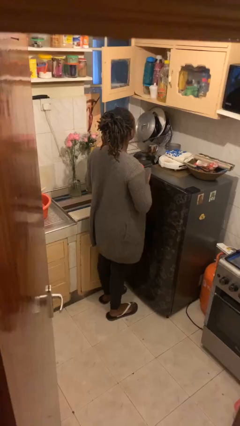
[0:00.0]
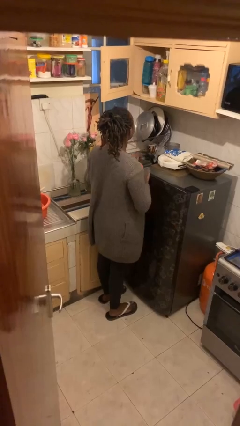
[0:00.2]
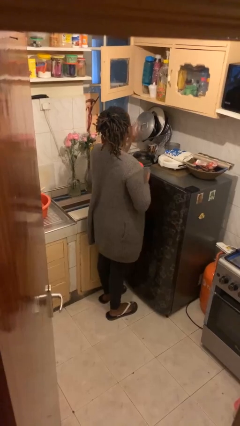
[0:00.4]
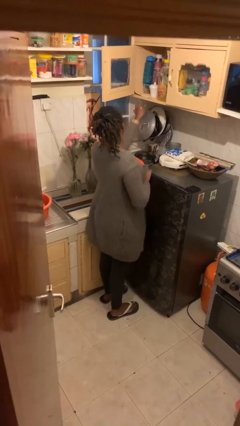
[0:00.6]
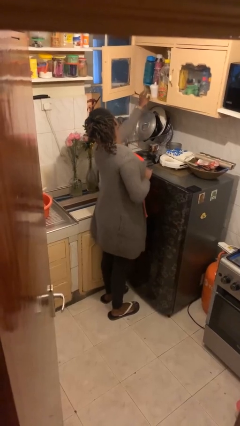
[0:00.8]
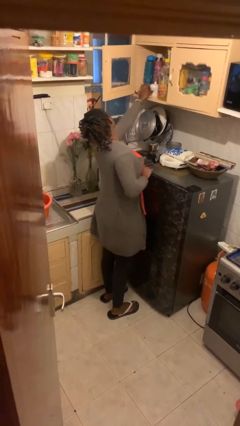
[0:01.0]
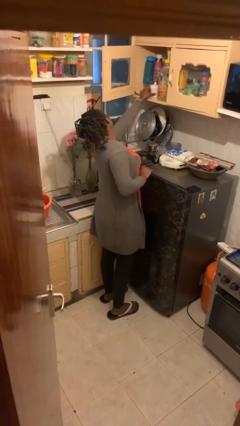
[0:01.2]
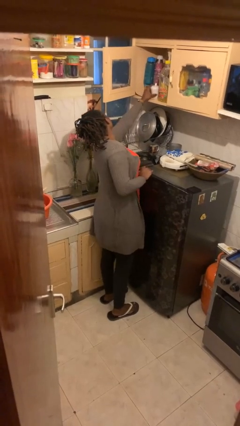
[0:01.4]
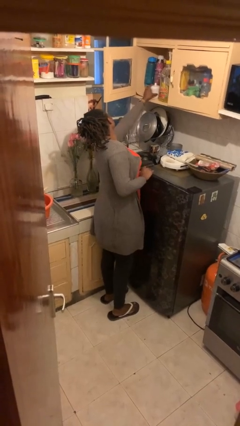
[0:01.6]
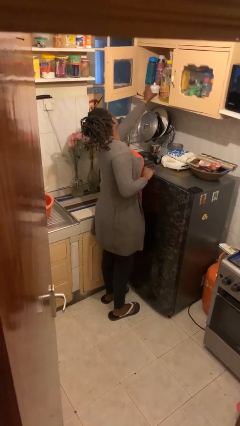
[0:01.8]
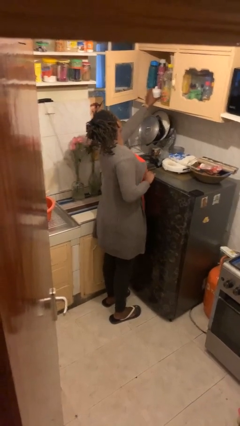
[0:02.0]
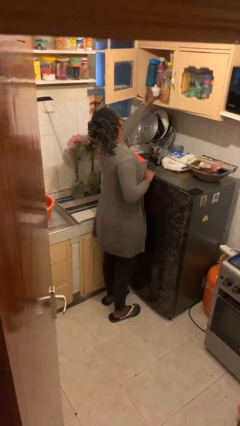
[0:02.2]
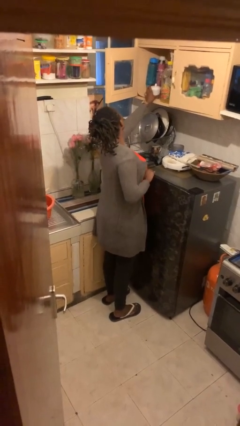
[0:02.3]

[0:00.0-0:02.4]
person searches in cabinet

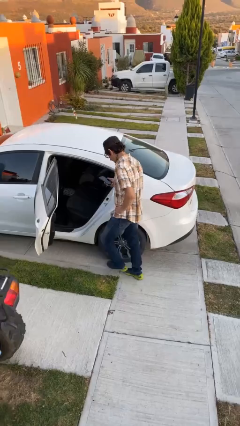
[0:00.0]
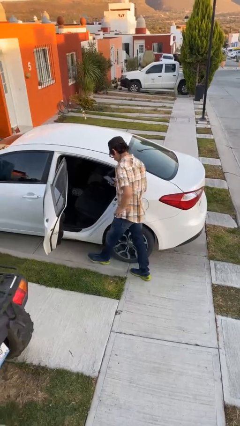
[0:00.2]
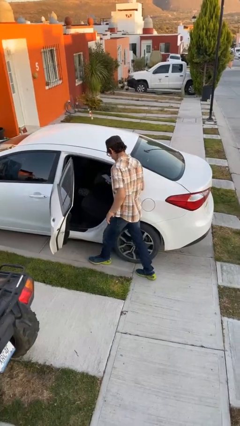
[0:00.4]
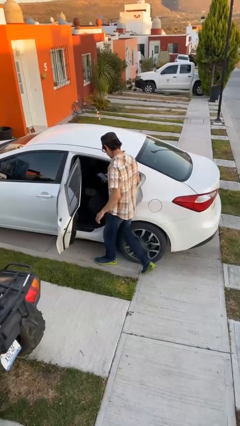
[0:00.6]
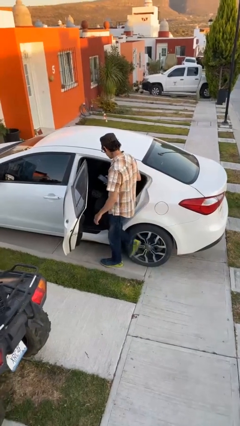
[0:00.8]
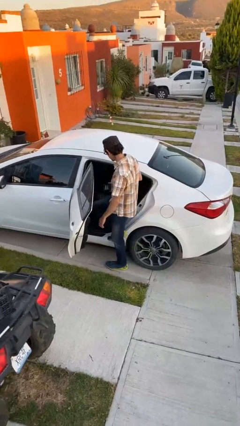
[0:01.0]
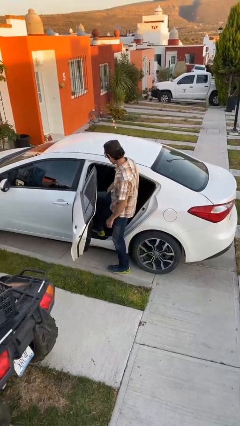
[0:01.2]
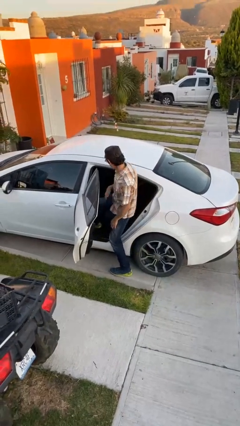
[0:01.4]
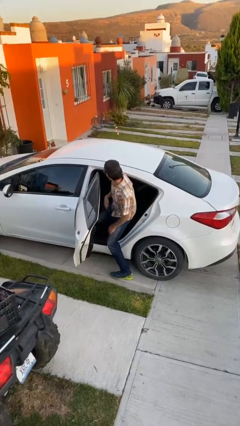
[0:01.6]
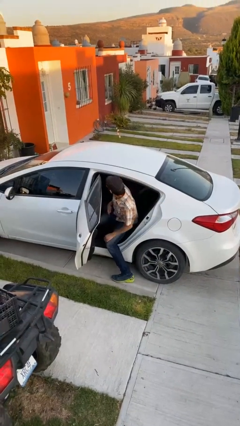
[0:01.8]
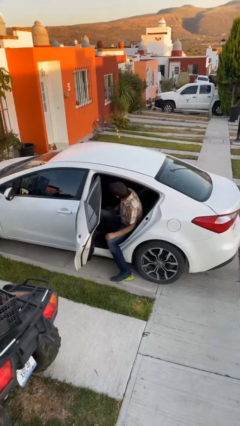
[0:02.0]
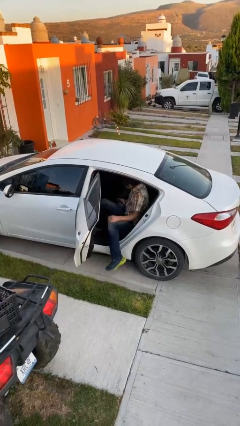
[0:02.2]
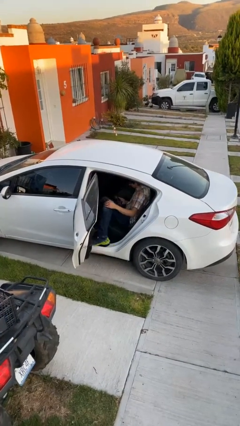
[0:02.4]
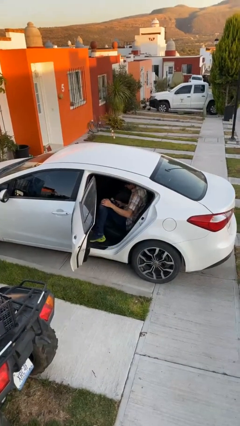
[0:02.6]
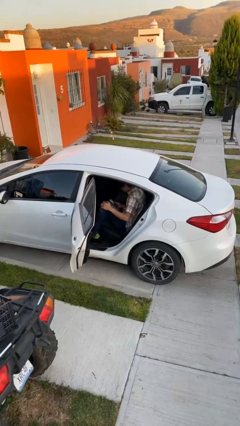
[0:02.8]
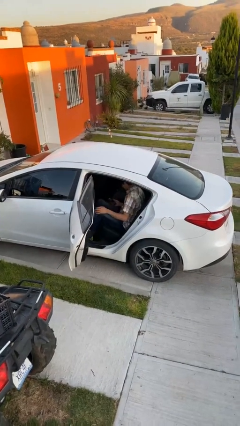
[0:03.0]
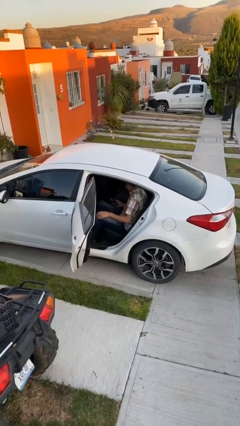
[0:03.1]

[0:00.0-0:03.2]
person enters car

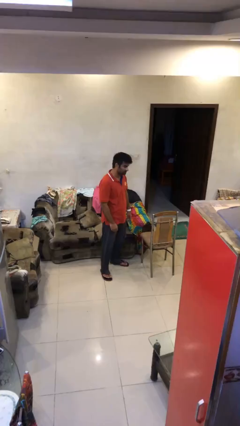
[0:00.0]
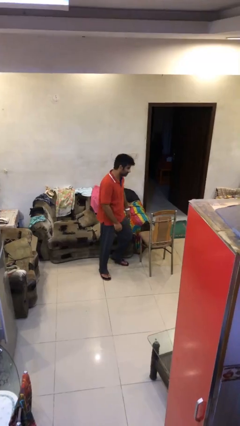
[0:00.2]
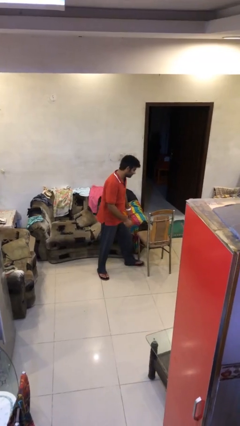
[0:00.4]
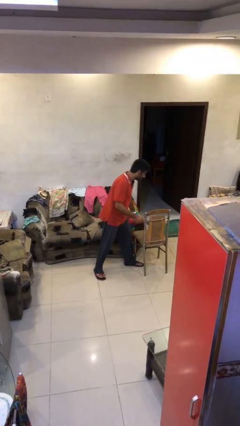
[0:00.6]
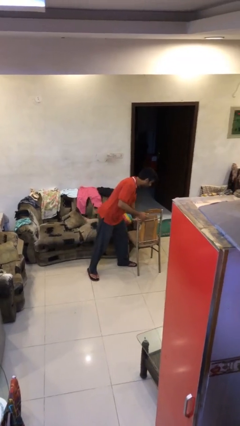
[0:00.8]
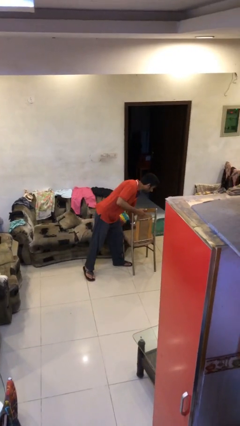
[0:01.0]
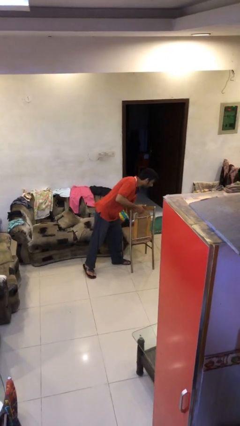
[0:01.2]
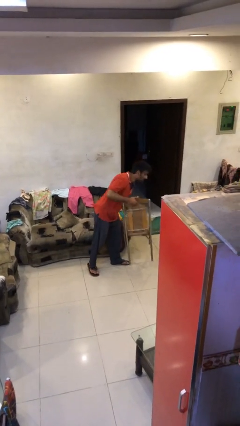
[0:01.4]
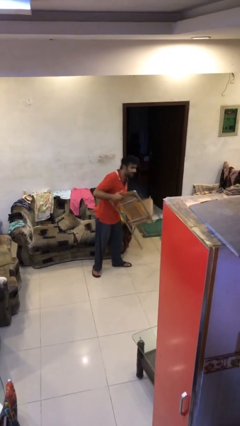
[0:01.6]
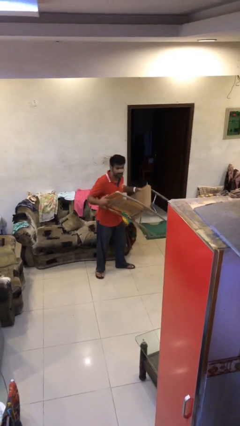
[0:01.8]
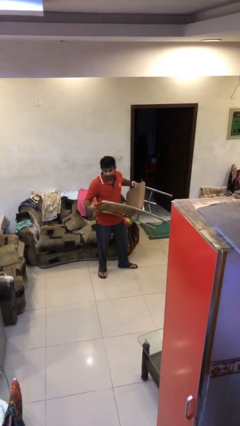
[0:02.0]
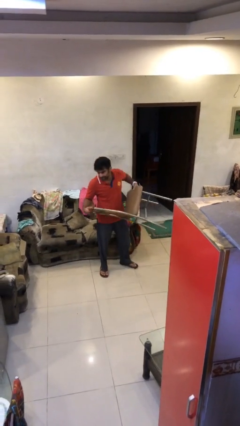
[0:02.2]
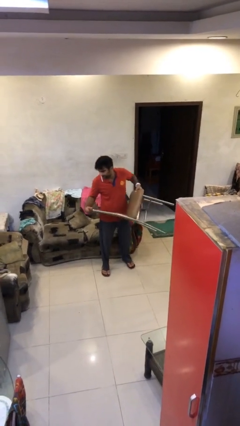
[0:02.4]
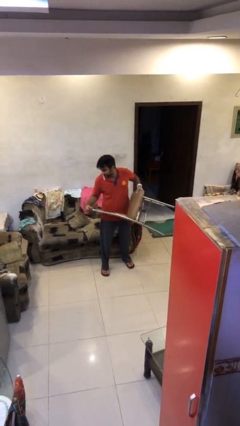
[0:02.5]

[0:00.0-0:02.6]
person picks up object from floor

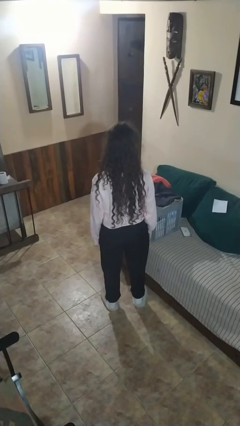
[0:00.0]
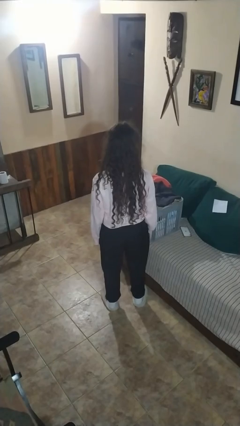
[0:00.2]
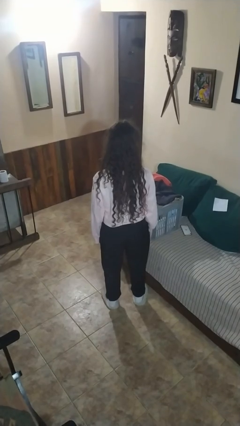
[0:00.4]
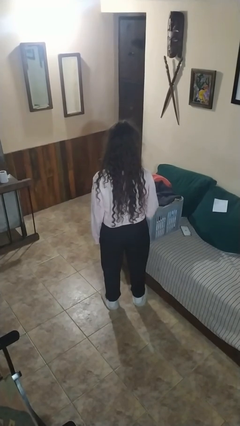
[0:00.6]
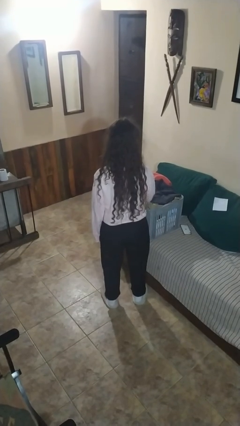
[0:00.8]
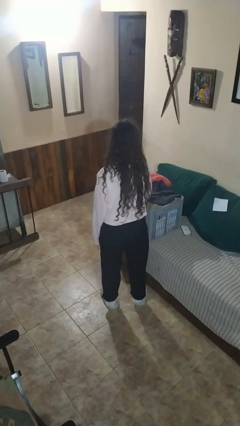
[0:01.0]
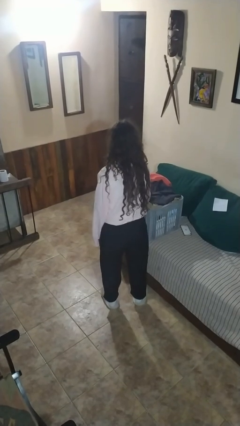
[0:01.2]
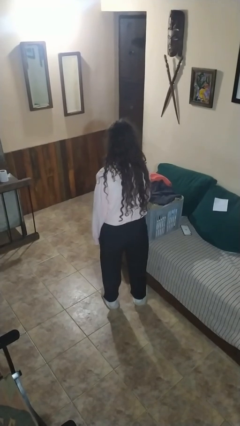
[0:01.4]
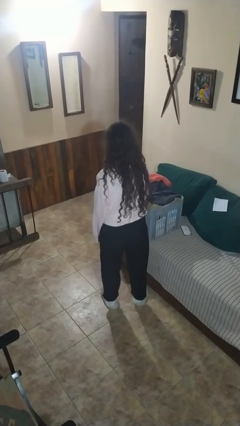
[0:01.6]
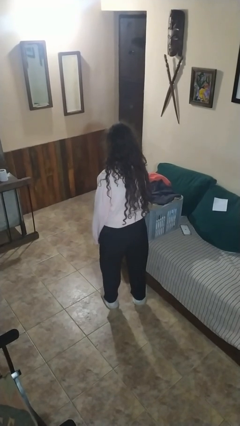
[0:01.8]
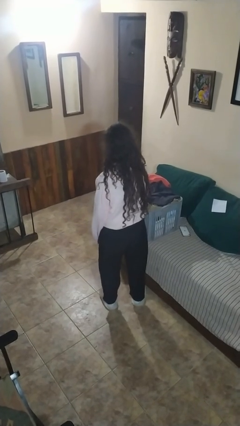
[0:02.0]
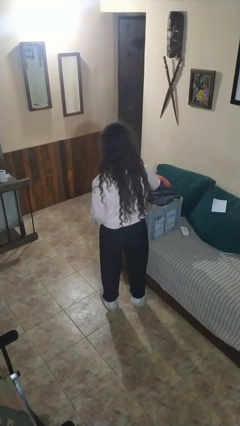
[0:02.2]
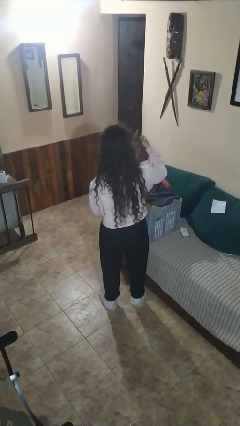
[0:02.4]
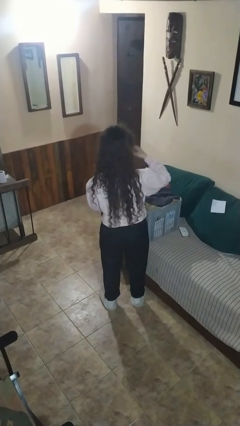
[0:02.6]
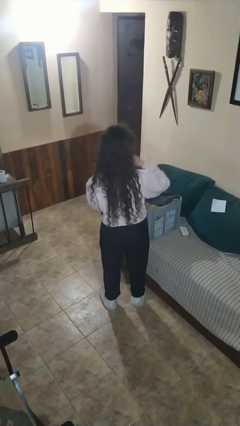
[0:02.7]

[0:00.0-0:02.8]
person takes object from basket

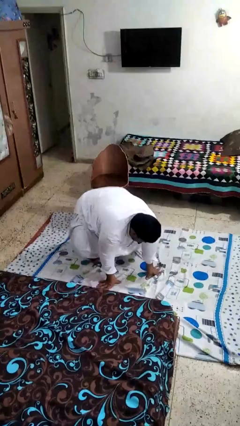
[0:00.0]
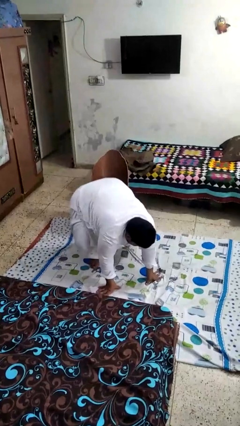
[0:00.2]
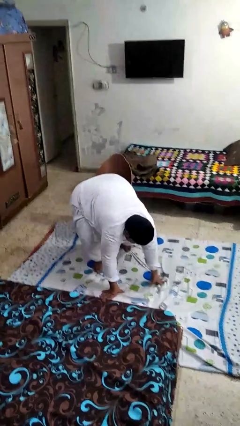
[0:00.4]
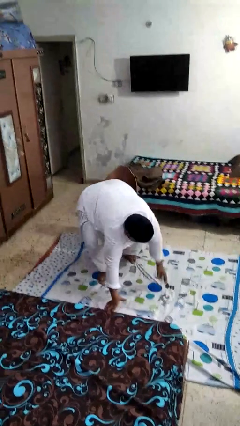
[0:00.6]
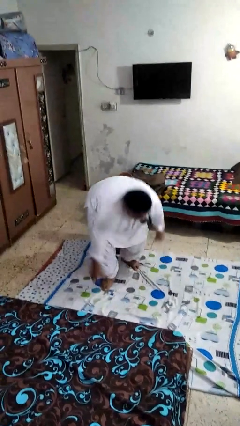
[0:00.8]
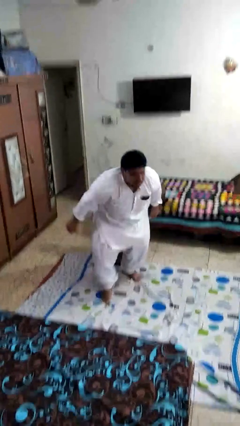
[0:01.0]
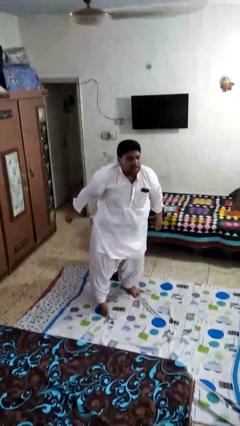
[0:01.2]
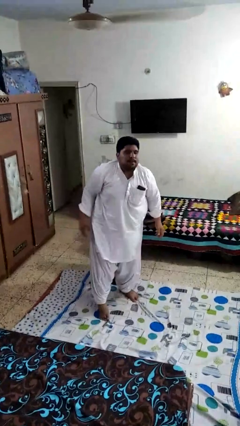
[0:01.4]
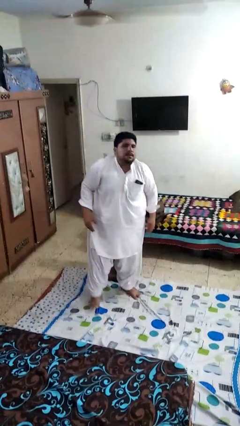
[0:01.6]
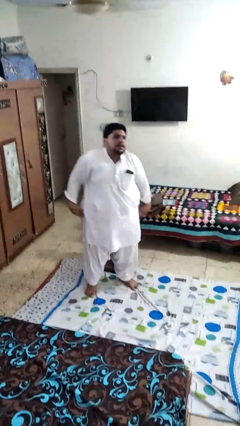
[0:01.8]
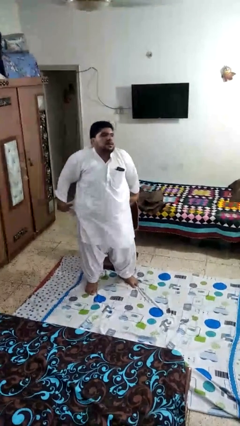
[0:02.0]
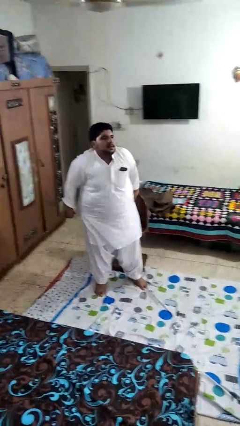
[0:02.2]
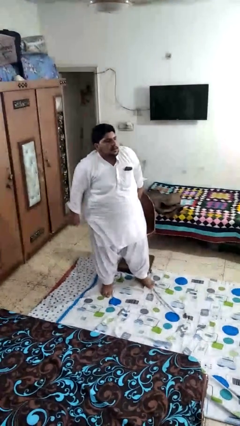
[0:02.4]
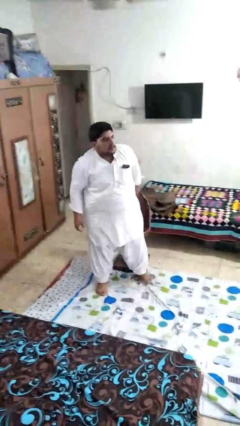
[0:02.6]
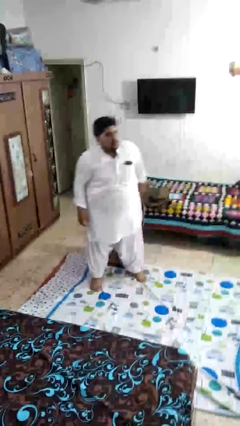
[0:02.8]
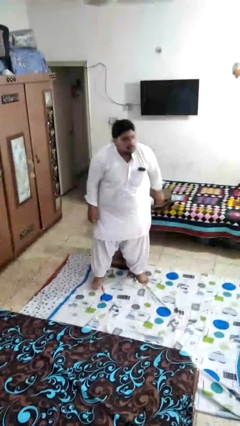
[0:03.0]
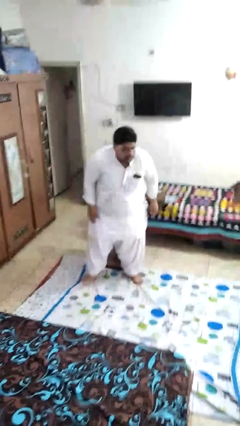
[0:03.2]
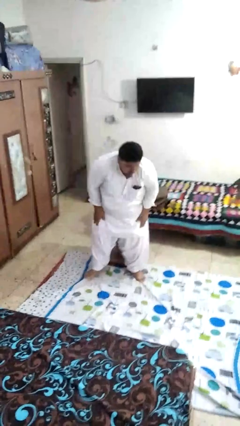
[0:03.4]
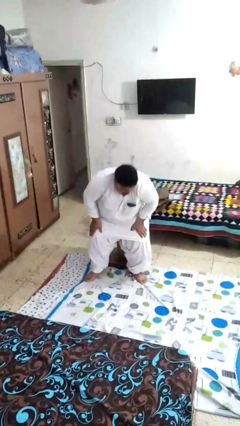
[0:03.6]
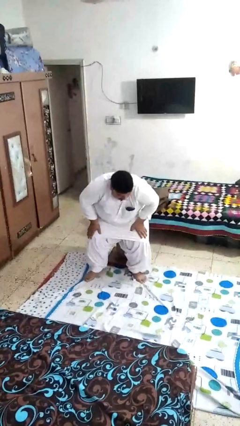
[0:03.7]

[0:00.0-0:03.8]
person stands up from floor

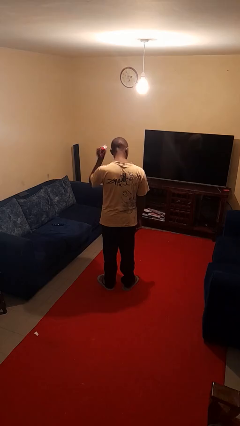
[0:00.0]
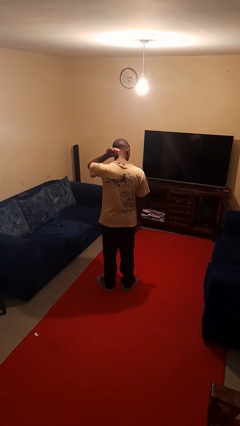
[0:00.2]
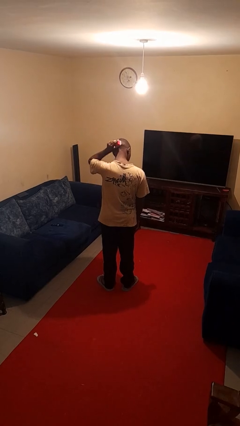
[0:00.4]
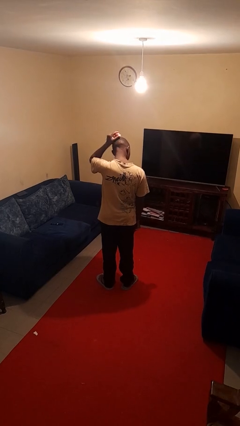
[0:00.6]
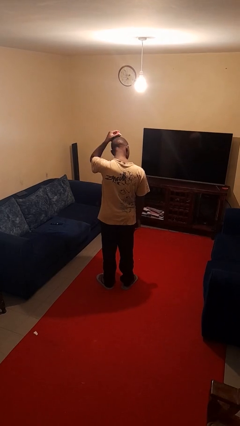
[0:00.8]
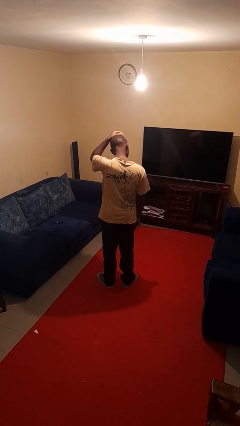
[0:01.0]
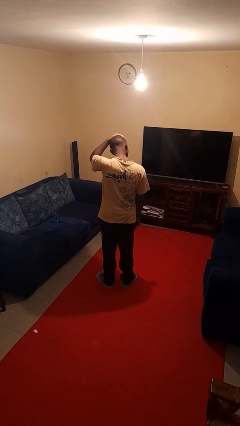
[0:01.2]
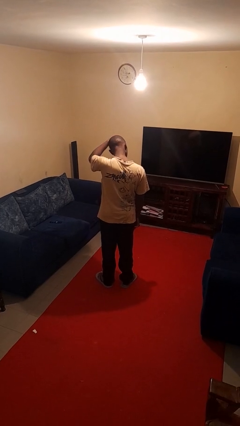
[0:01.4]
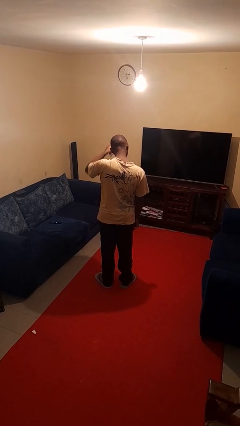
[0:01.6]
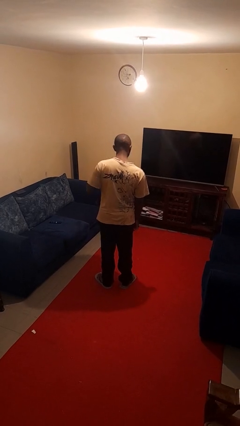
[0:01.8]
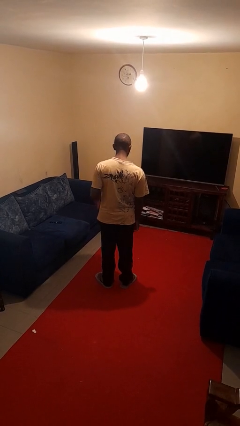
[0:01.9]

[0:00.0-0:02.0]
person brushes hair
